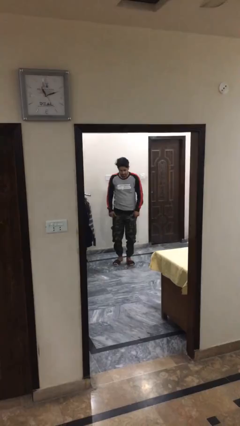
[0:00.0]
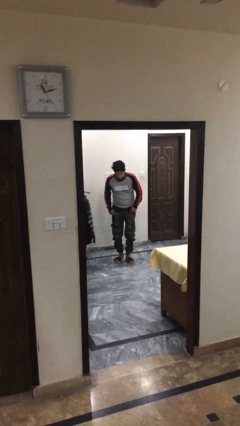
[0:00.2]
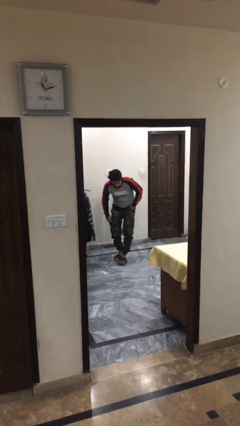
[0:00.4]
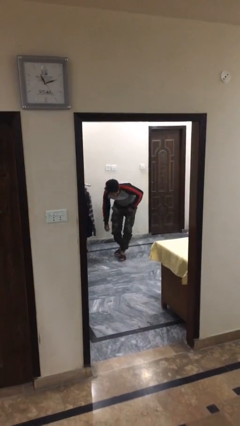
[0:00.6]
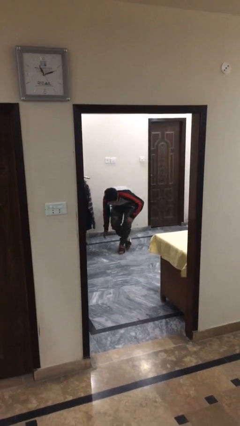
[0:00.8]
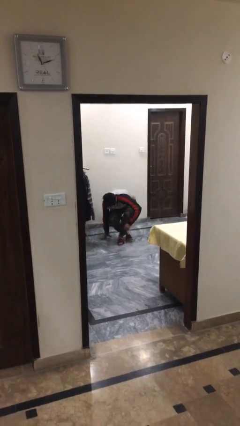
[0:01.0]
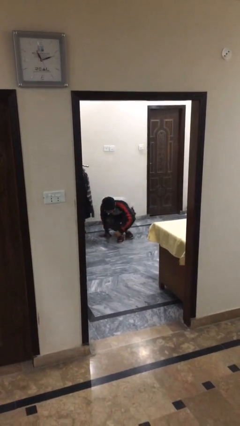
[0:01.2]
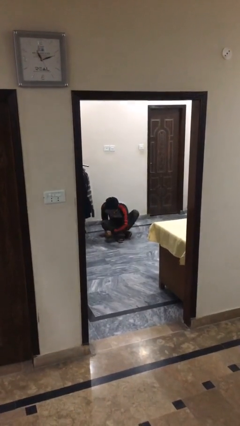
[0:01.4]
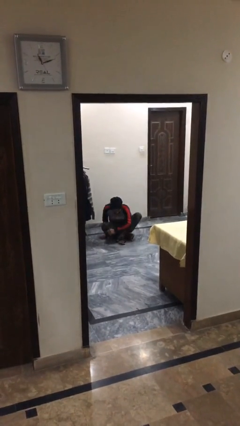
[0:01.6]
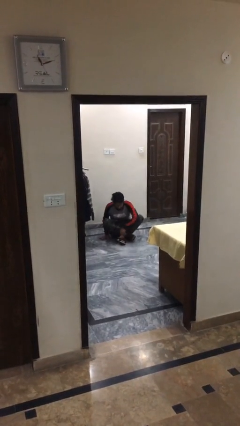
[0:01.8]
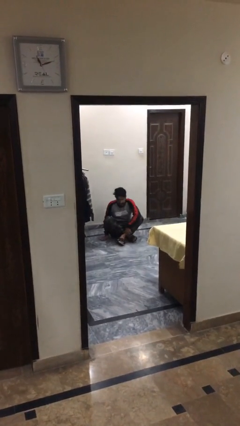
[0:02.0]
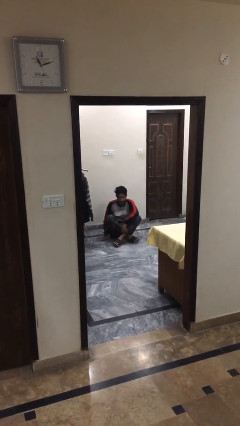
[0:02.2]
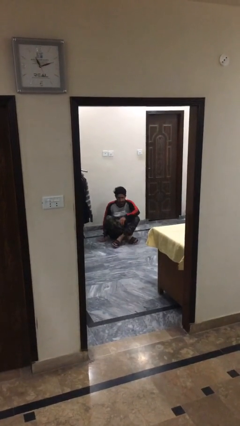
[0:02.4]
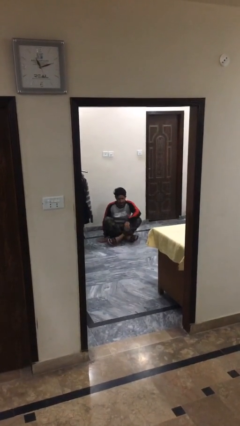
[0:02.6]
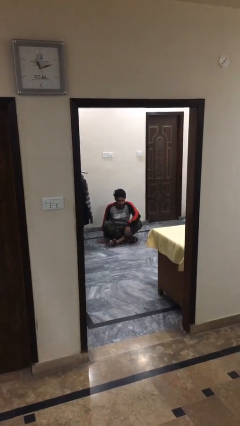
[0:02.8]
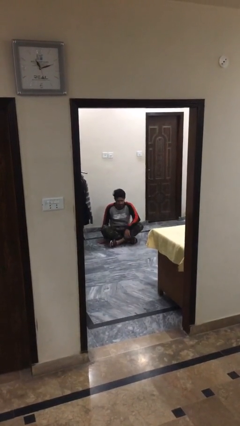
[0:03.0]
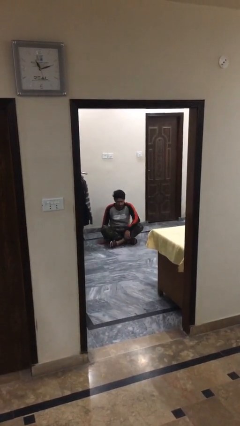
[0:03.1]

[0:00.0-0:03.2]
person sits down

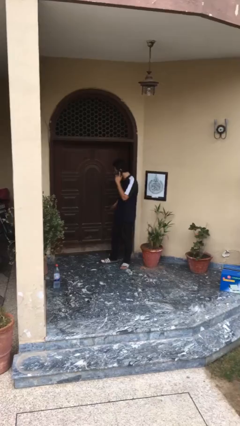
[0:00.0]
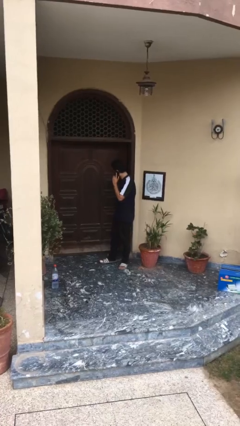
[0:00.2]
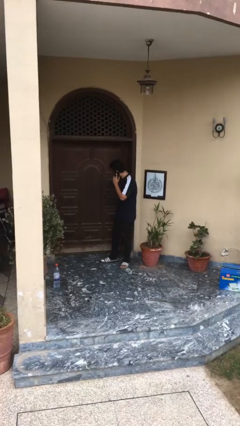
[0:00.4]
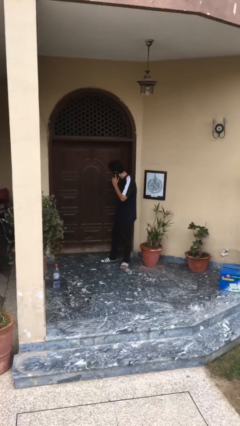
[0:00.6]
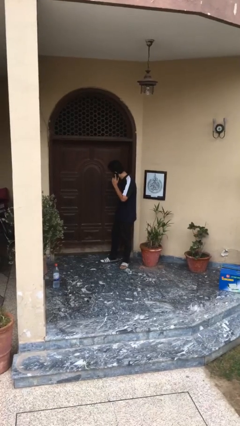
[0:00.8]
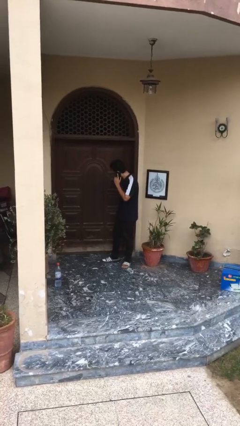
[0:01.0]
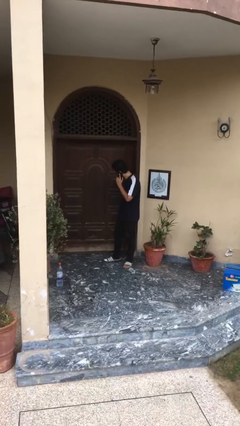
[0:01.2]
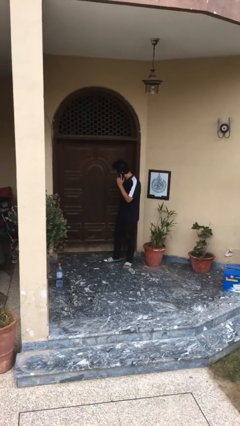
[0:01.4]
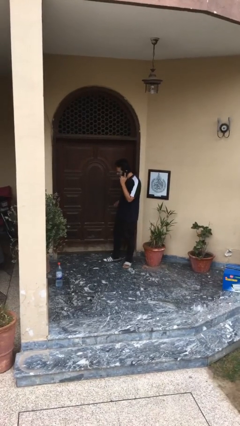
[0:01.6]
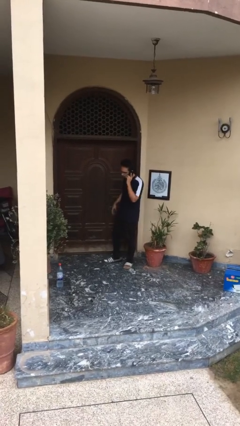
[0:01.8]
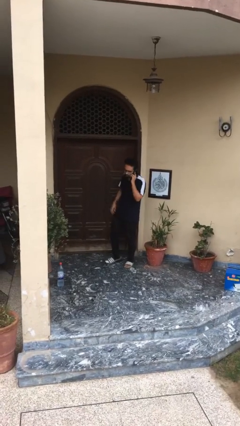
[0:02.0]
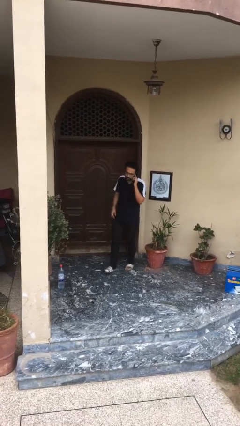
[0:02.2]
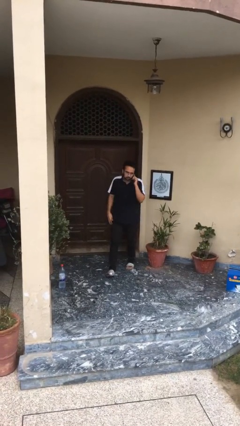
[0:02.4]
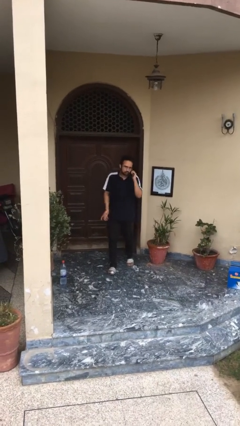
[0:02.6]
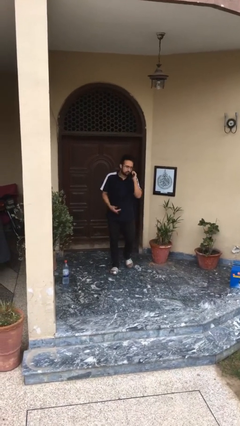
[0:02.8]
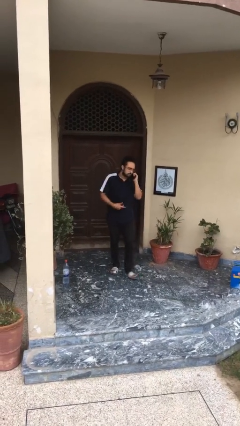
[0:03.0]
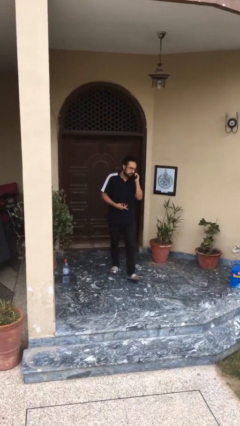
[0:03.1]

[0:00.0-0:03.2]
person closes facility door

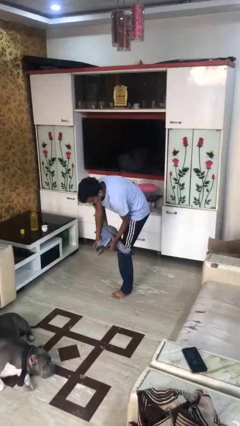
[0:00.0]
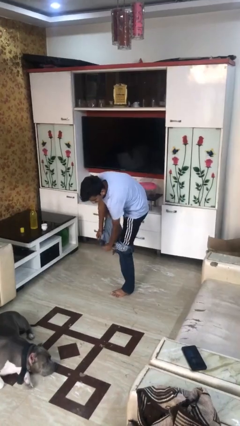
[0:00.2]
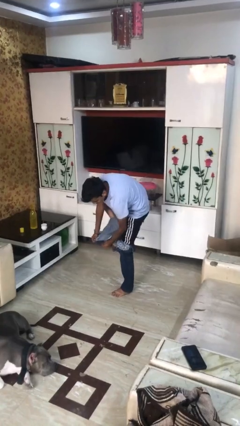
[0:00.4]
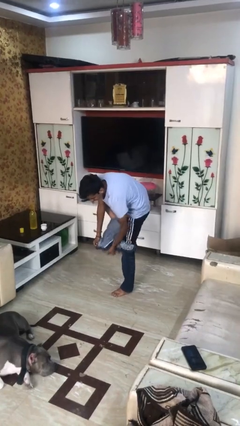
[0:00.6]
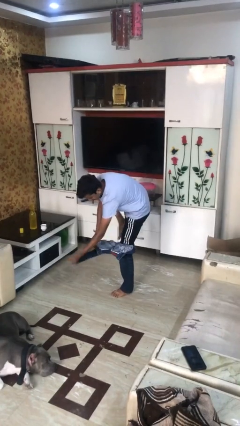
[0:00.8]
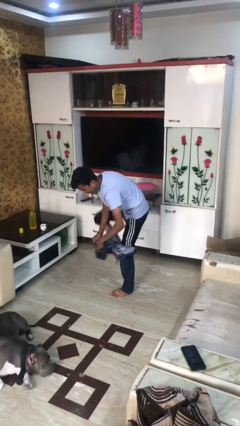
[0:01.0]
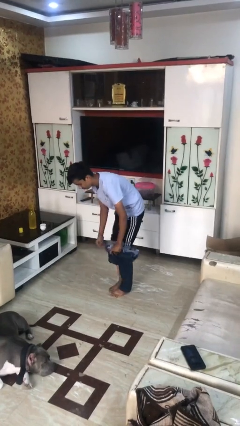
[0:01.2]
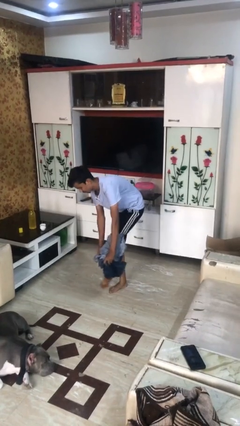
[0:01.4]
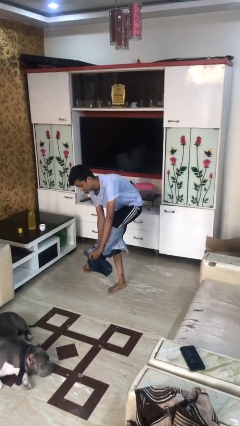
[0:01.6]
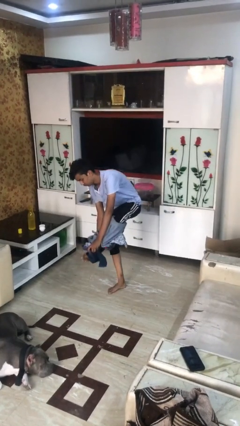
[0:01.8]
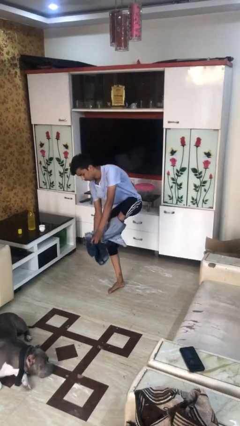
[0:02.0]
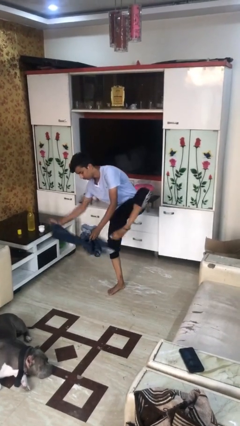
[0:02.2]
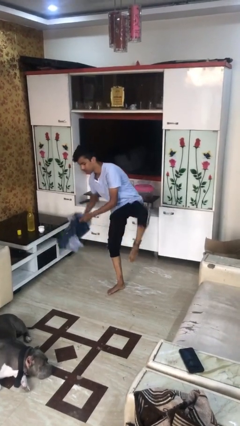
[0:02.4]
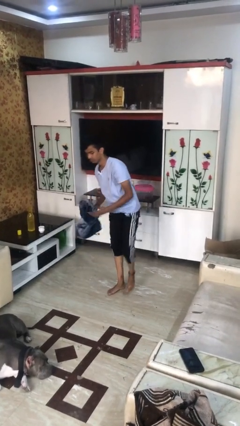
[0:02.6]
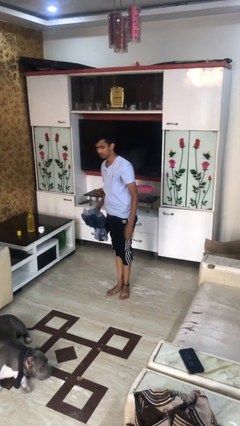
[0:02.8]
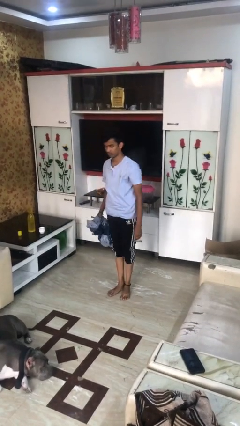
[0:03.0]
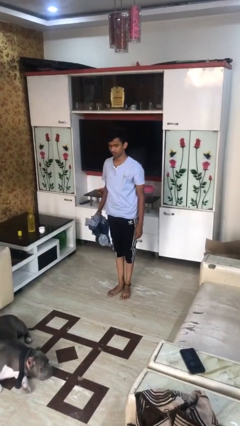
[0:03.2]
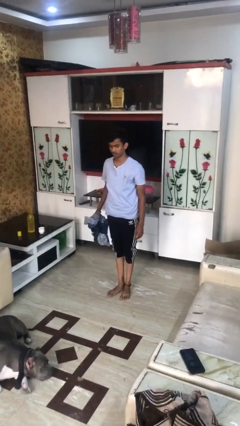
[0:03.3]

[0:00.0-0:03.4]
person takes off pants

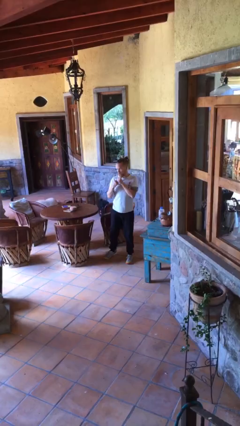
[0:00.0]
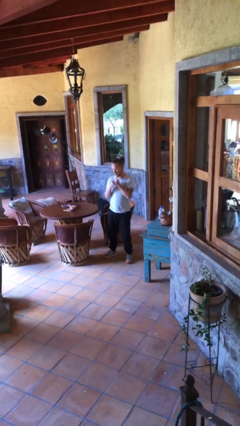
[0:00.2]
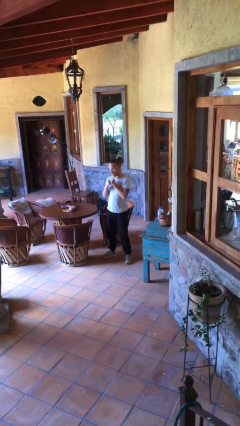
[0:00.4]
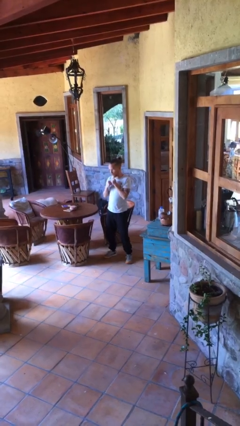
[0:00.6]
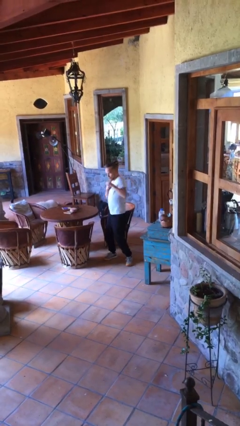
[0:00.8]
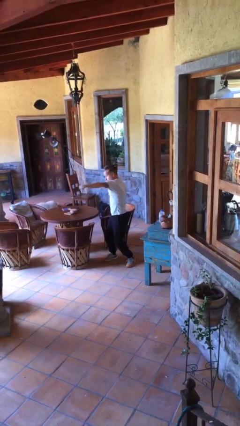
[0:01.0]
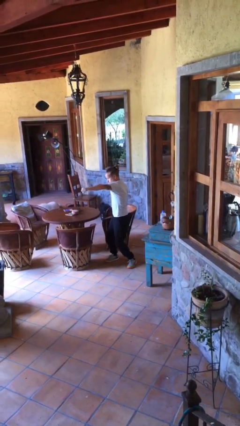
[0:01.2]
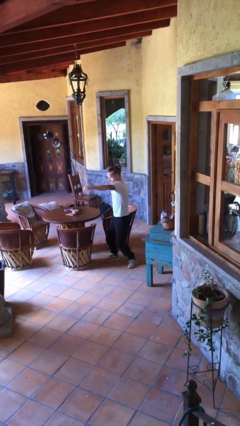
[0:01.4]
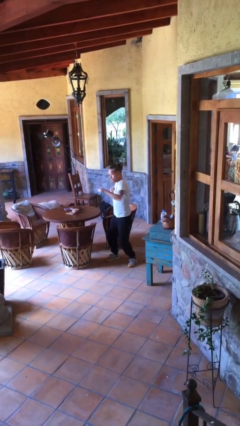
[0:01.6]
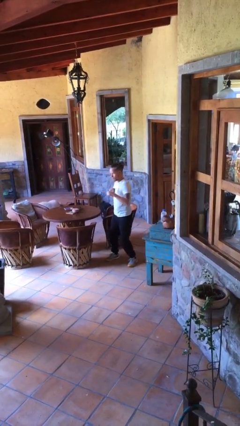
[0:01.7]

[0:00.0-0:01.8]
person karate chop

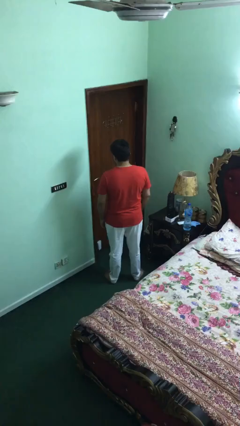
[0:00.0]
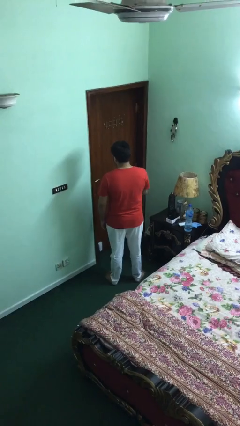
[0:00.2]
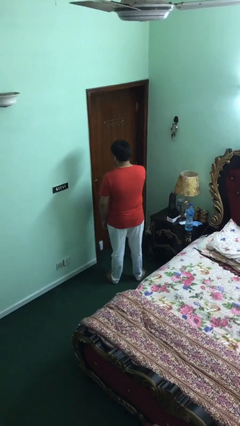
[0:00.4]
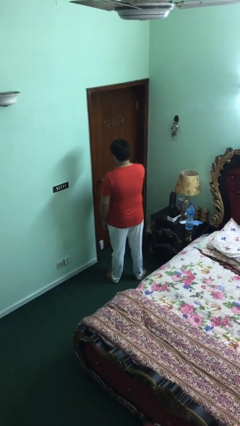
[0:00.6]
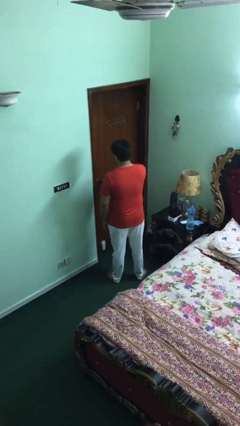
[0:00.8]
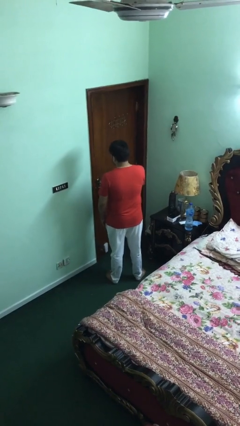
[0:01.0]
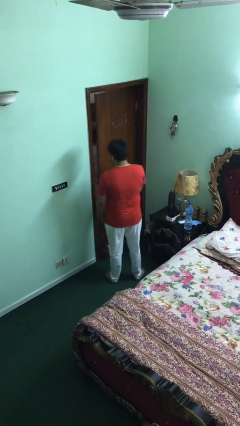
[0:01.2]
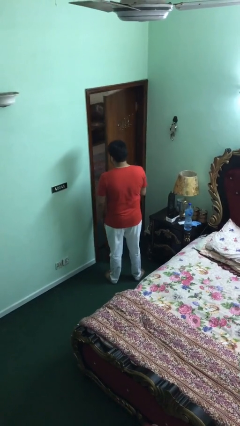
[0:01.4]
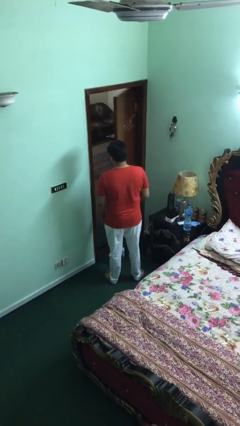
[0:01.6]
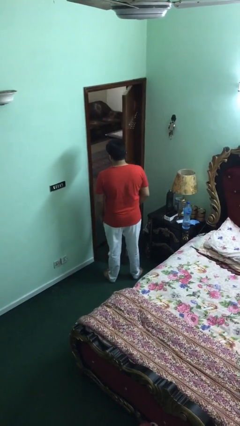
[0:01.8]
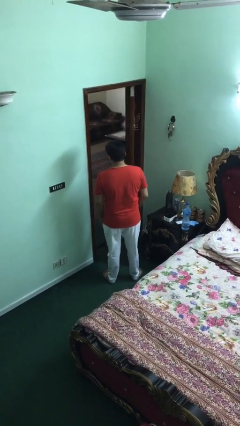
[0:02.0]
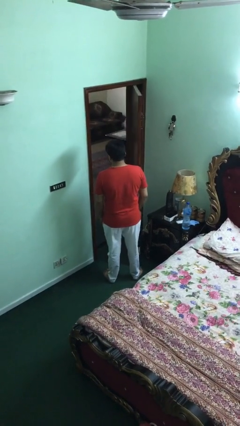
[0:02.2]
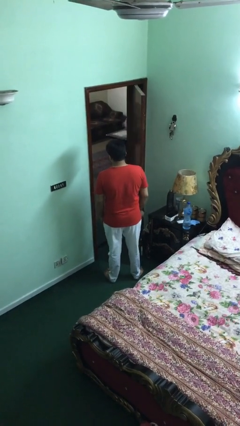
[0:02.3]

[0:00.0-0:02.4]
person opens facility door

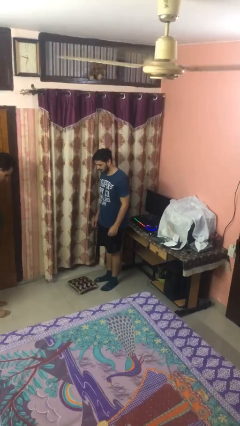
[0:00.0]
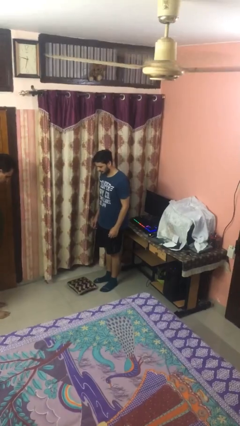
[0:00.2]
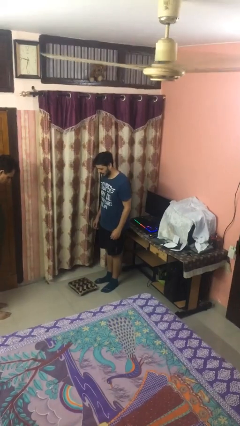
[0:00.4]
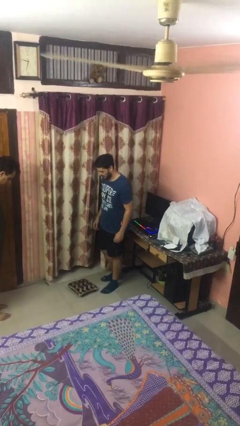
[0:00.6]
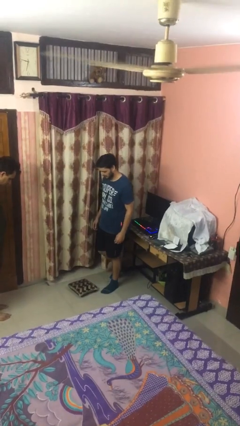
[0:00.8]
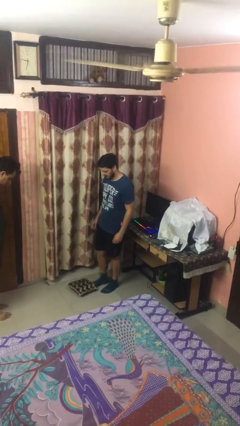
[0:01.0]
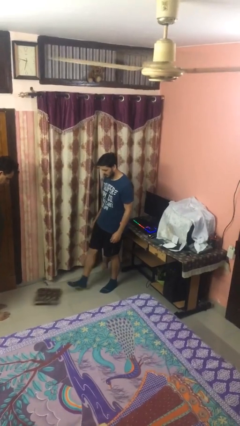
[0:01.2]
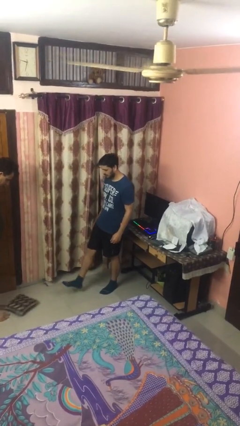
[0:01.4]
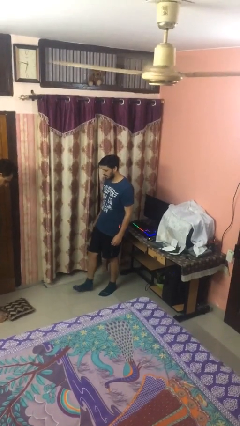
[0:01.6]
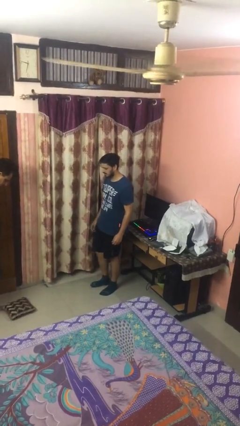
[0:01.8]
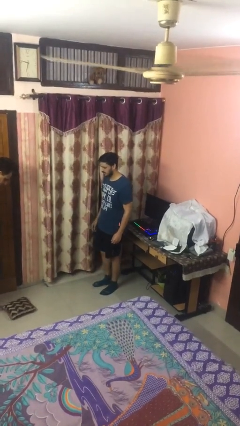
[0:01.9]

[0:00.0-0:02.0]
person kicks object to person

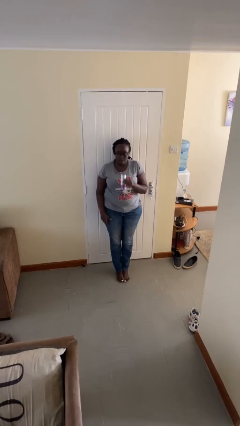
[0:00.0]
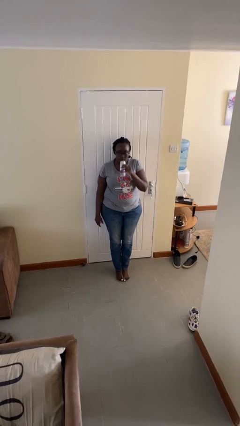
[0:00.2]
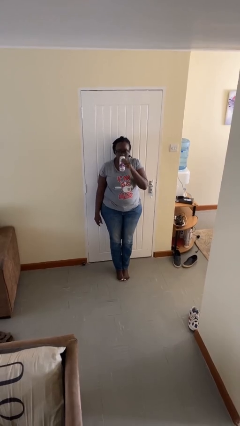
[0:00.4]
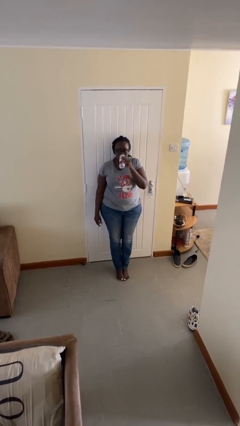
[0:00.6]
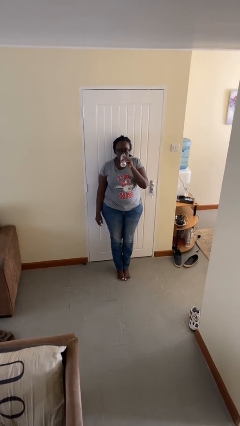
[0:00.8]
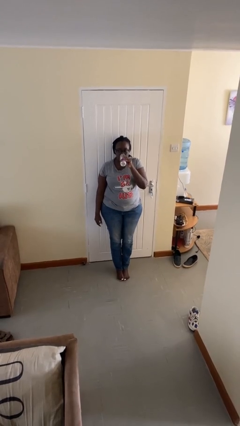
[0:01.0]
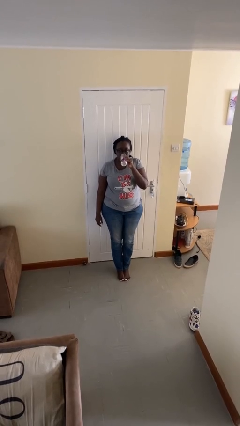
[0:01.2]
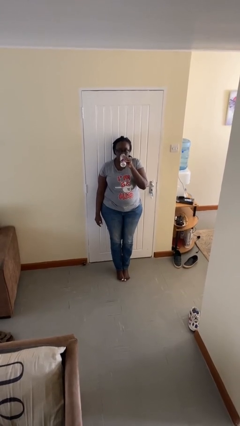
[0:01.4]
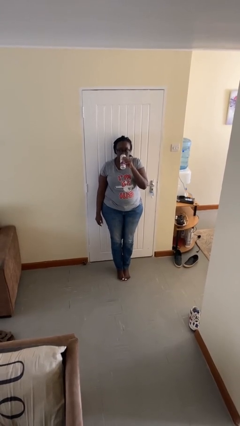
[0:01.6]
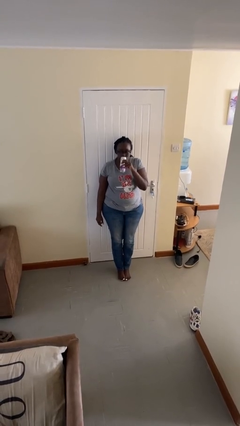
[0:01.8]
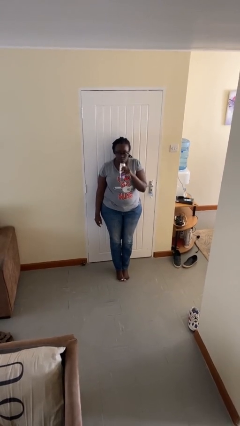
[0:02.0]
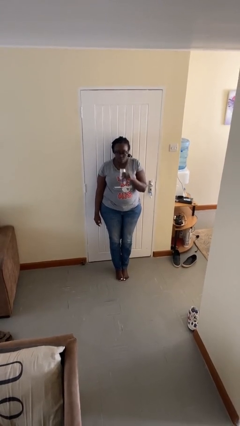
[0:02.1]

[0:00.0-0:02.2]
person drinks from beverage can
